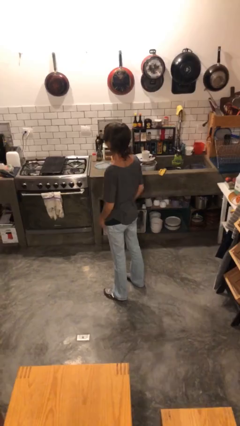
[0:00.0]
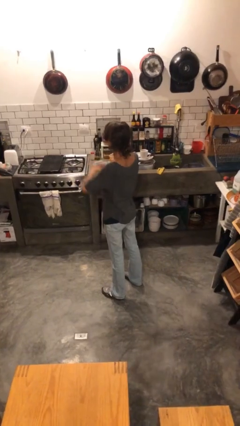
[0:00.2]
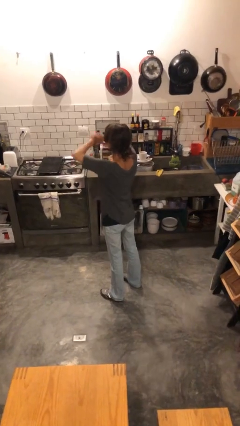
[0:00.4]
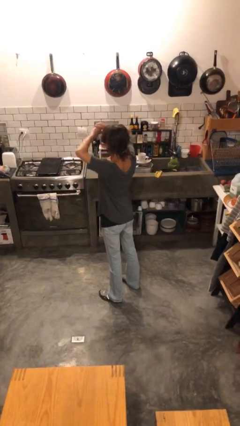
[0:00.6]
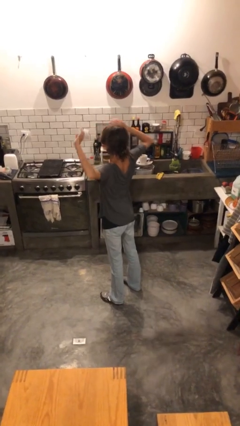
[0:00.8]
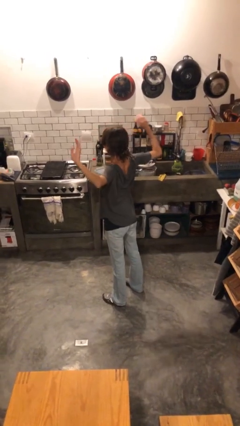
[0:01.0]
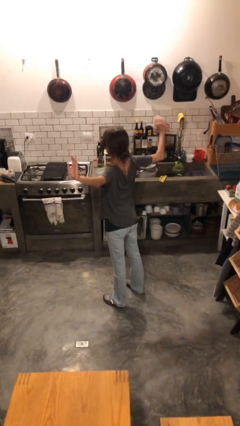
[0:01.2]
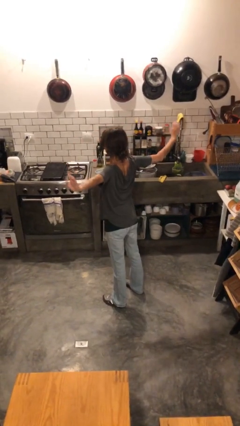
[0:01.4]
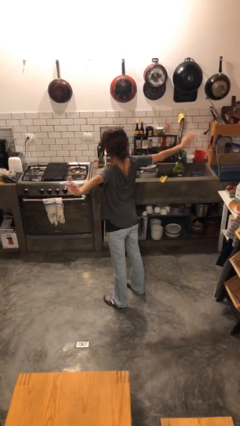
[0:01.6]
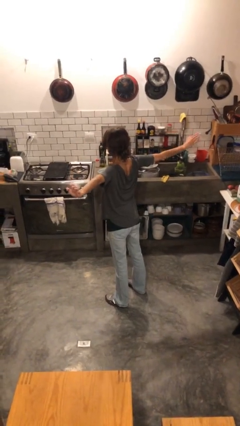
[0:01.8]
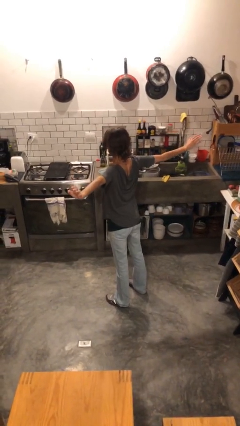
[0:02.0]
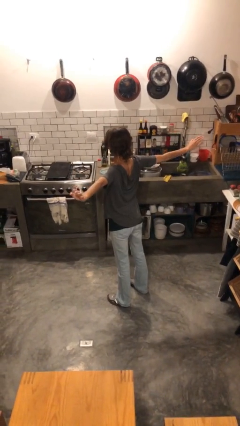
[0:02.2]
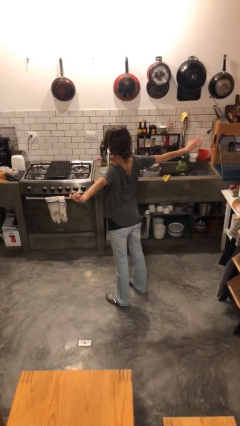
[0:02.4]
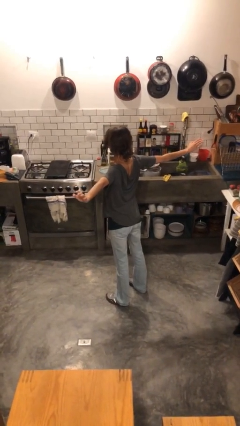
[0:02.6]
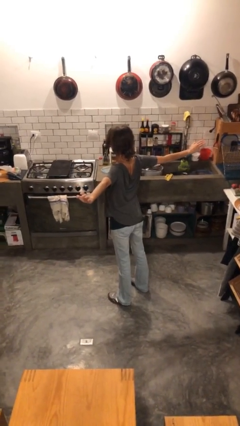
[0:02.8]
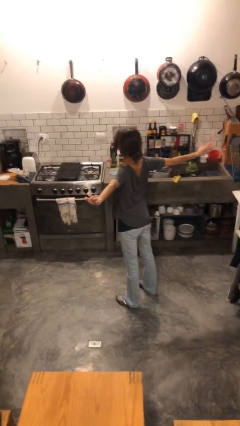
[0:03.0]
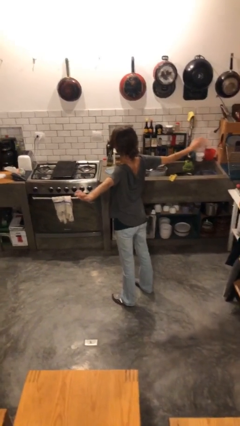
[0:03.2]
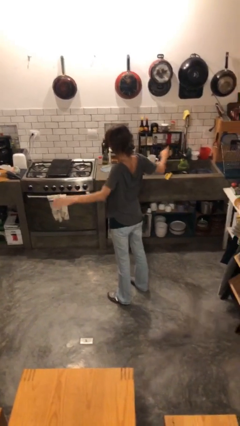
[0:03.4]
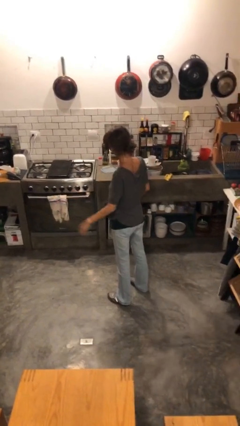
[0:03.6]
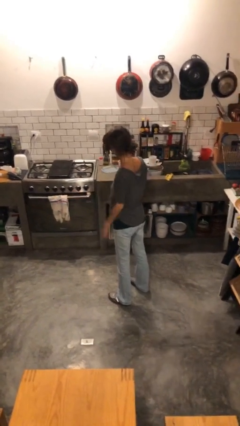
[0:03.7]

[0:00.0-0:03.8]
person stretches arms to side

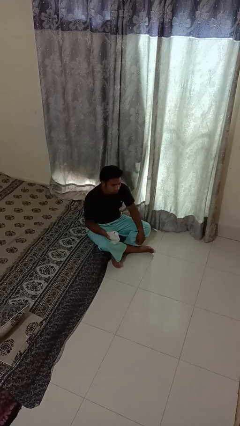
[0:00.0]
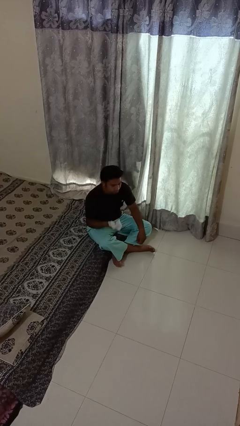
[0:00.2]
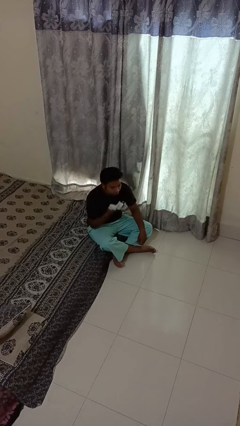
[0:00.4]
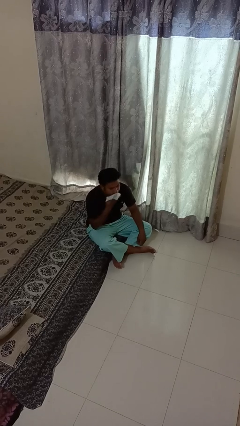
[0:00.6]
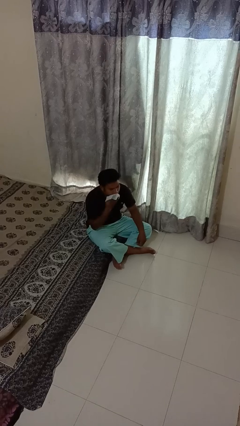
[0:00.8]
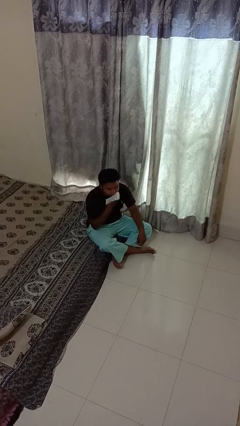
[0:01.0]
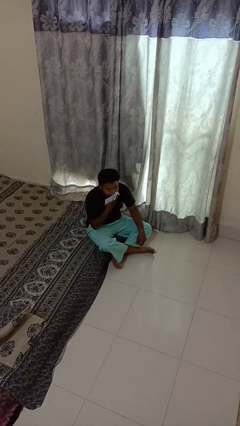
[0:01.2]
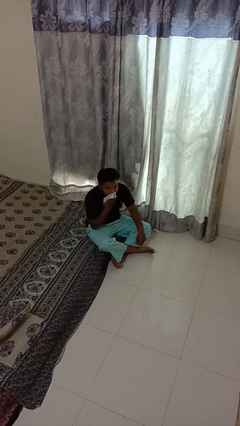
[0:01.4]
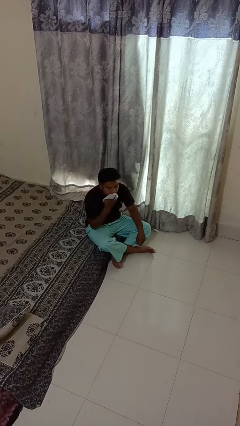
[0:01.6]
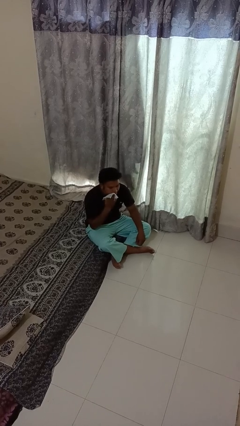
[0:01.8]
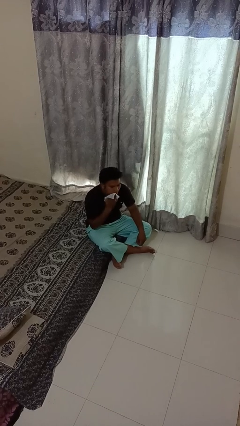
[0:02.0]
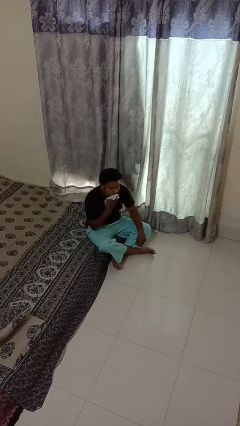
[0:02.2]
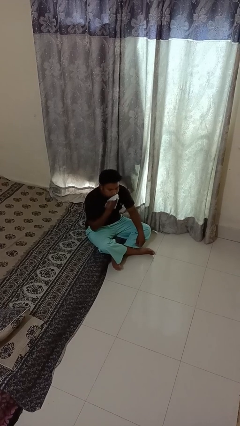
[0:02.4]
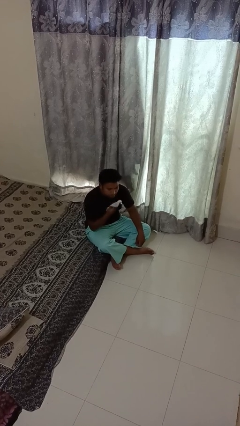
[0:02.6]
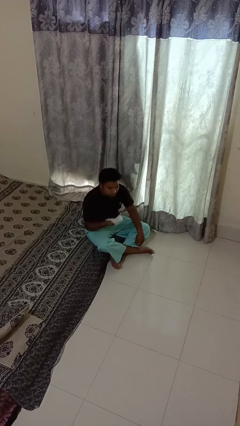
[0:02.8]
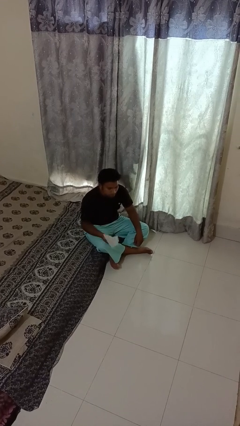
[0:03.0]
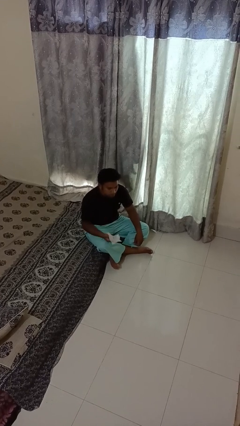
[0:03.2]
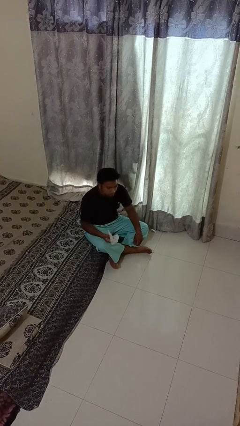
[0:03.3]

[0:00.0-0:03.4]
person wipes mouth with napkin

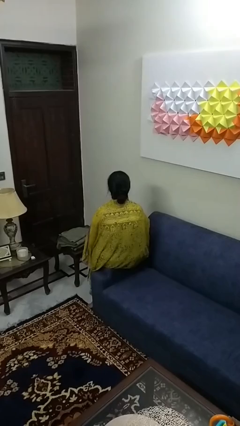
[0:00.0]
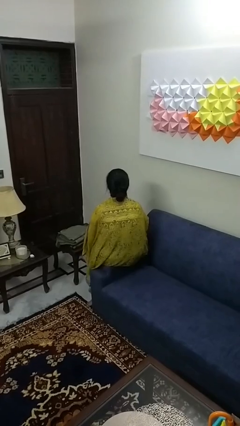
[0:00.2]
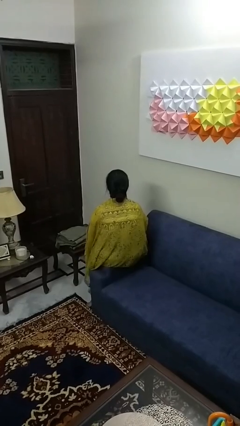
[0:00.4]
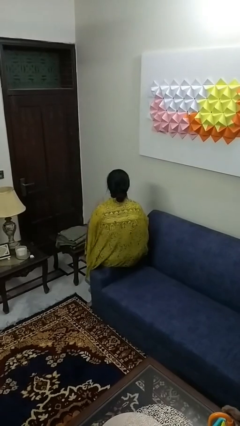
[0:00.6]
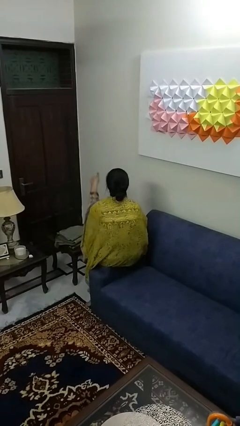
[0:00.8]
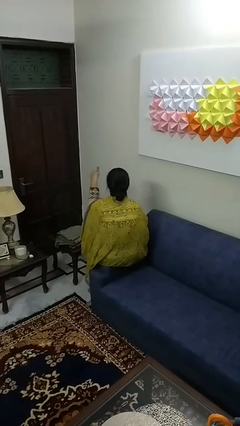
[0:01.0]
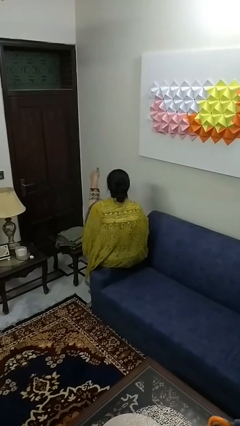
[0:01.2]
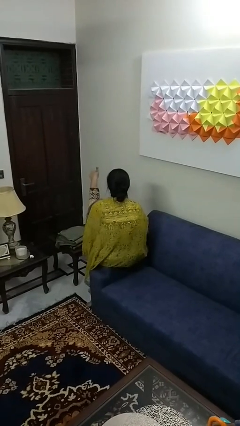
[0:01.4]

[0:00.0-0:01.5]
person gestures thumbs up

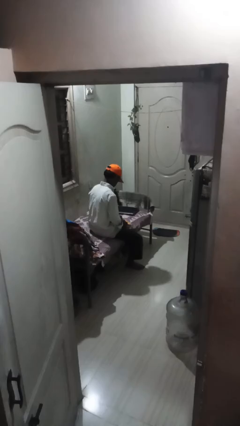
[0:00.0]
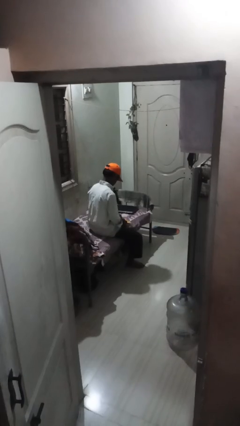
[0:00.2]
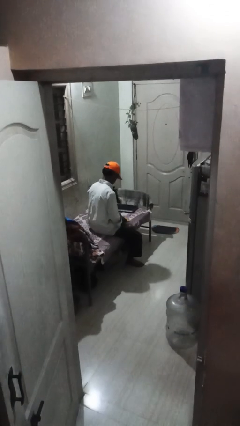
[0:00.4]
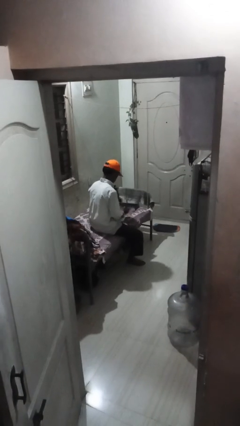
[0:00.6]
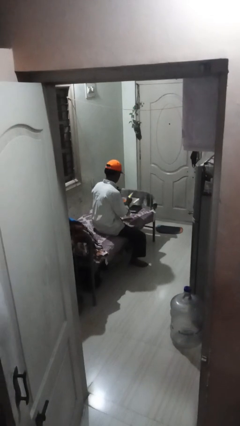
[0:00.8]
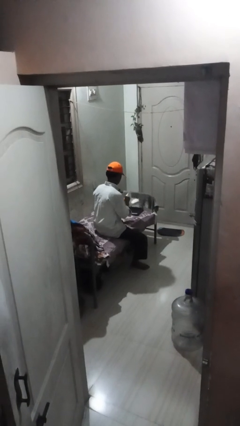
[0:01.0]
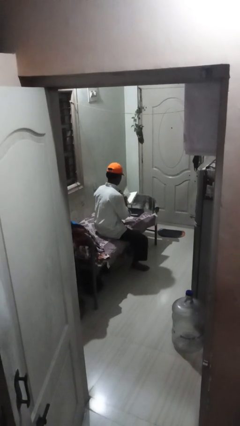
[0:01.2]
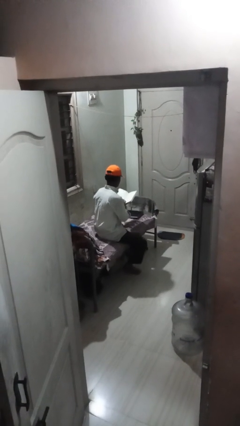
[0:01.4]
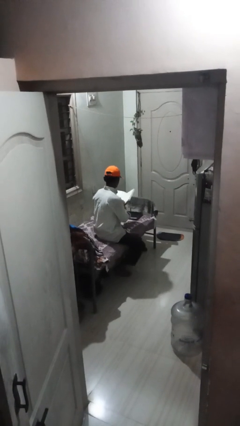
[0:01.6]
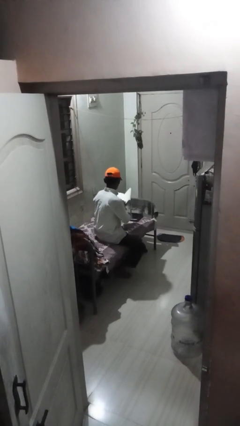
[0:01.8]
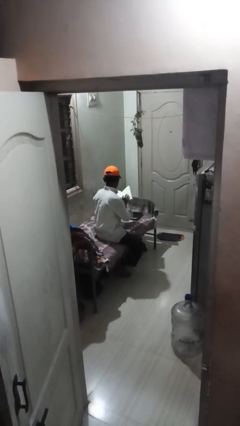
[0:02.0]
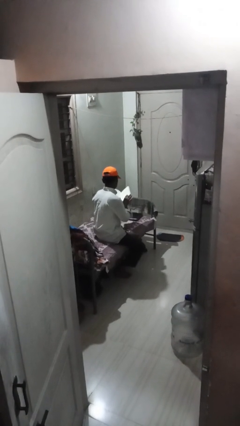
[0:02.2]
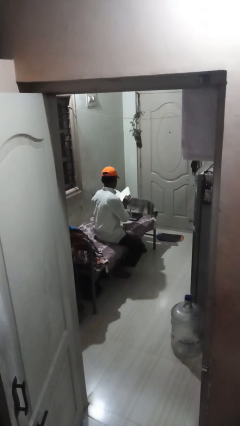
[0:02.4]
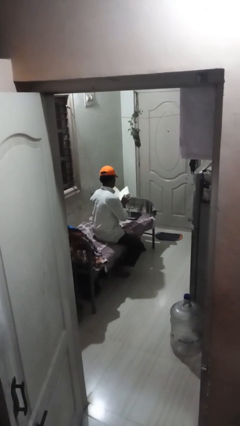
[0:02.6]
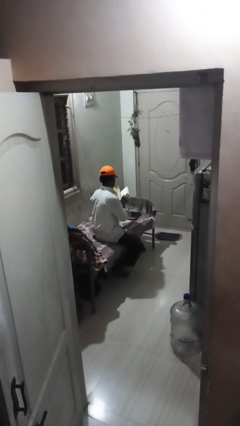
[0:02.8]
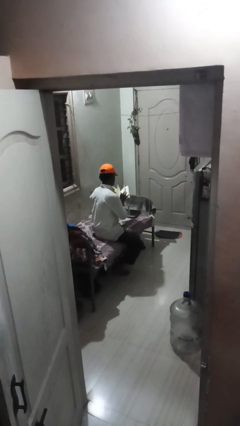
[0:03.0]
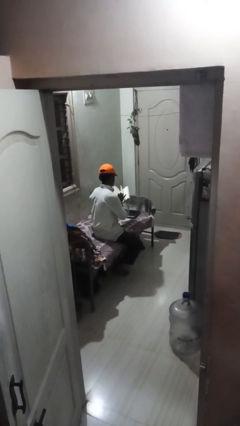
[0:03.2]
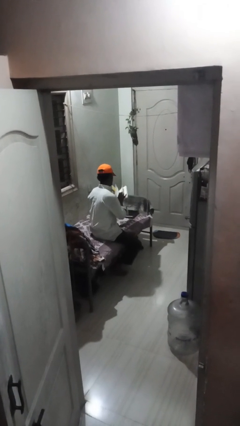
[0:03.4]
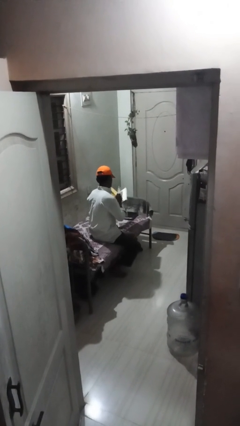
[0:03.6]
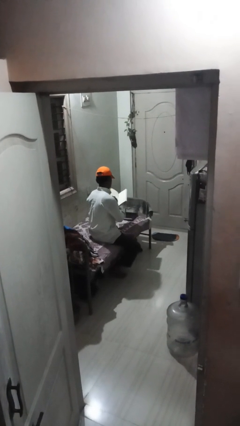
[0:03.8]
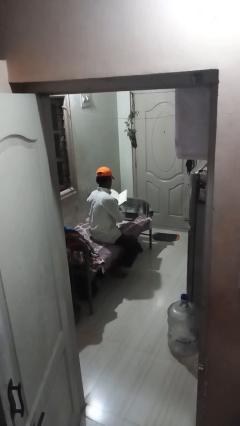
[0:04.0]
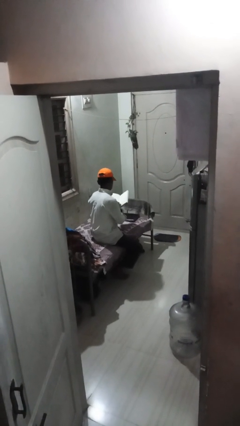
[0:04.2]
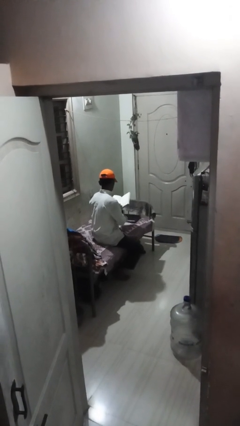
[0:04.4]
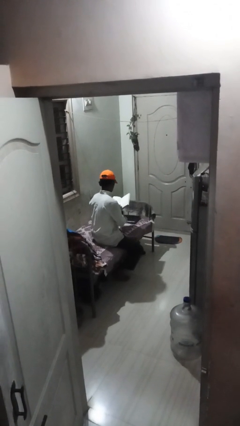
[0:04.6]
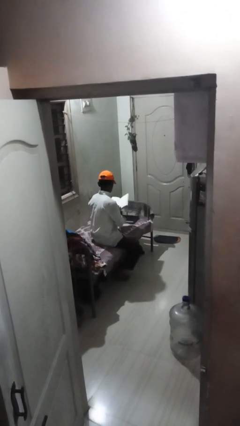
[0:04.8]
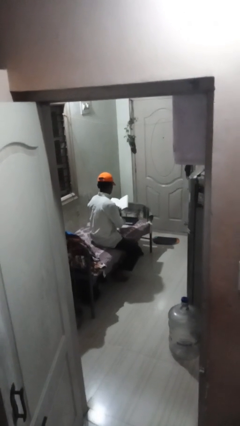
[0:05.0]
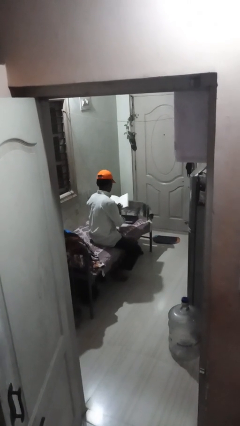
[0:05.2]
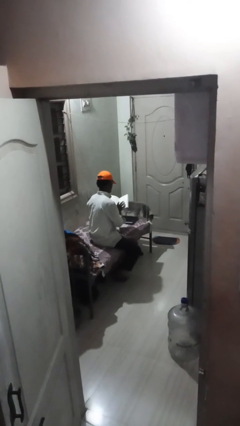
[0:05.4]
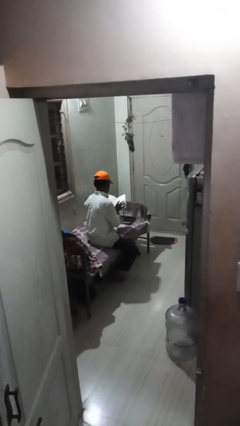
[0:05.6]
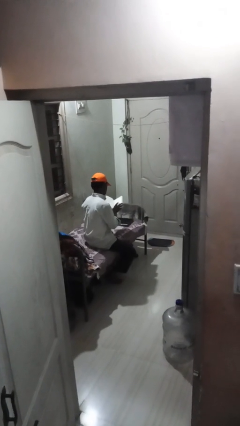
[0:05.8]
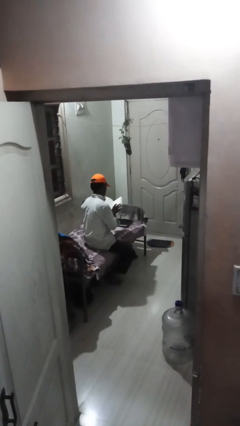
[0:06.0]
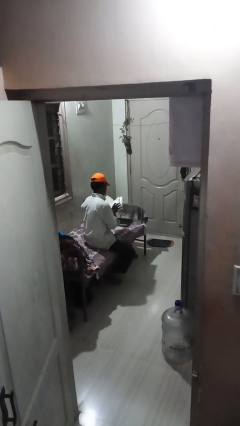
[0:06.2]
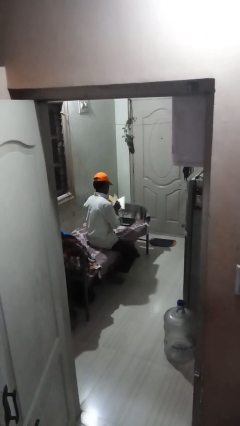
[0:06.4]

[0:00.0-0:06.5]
person reads book

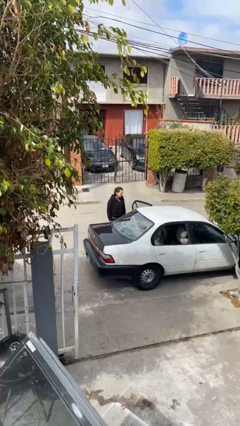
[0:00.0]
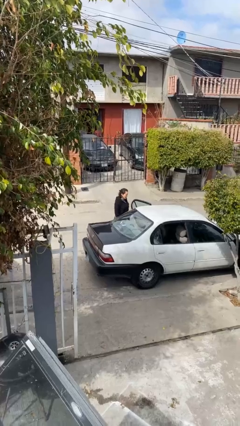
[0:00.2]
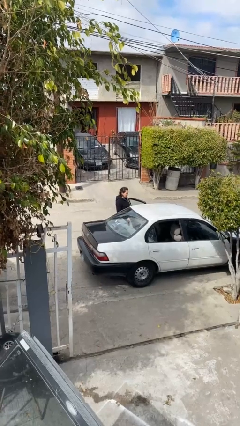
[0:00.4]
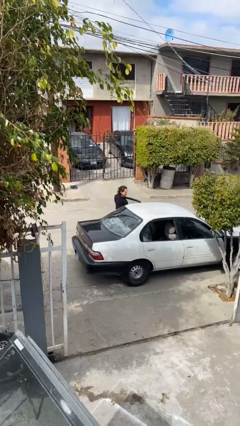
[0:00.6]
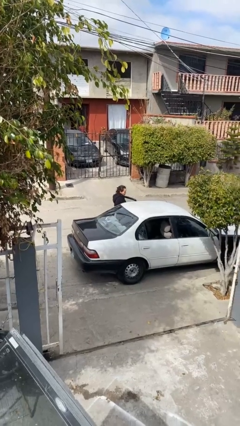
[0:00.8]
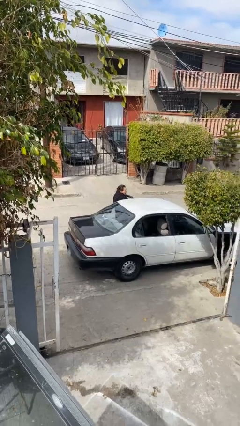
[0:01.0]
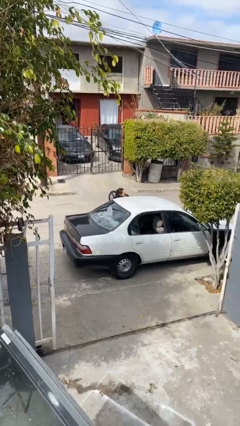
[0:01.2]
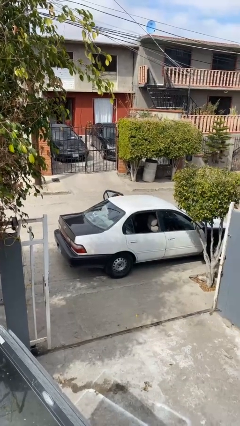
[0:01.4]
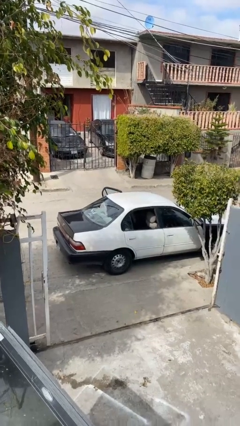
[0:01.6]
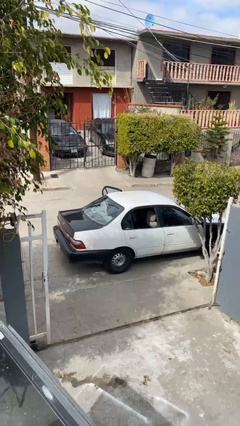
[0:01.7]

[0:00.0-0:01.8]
person enters car

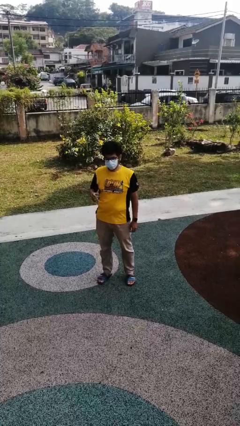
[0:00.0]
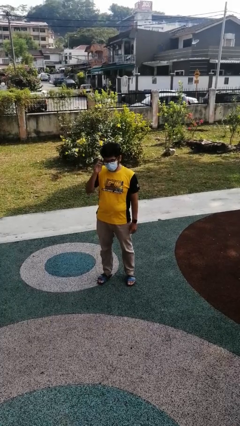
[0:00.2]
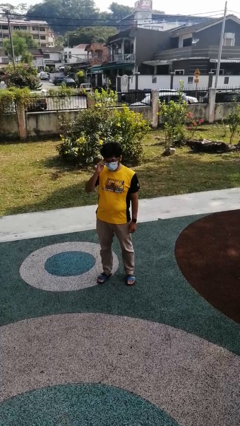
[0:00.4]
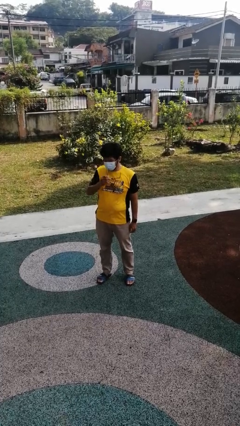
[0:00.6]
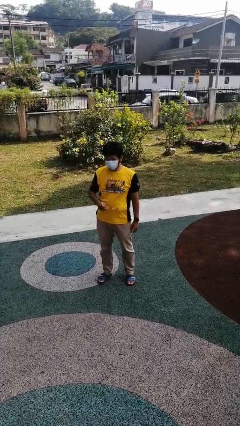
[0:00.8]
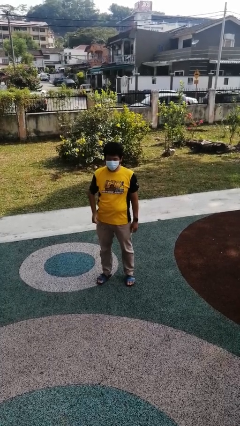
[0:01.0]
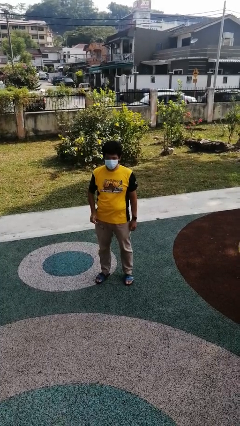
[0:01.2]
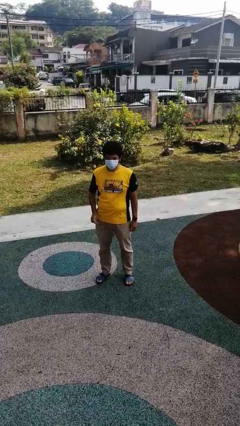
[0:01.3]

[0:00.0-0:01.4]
person takes off glasses
